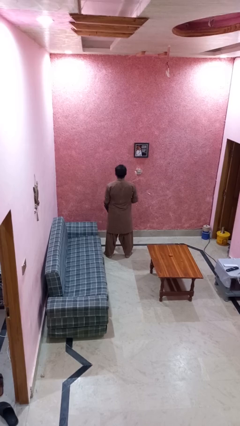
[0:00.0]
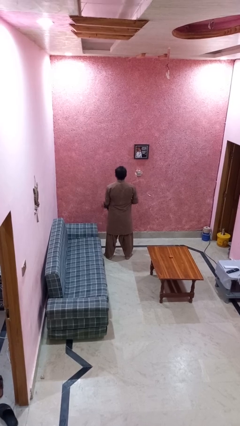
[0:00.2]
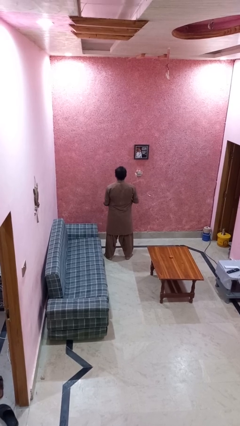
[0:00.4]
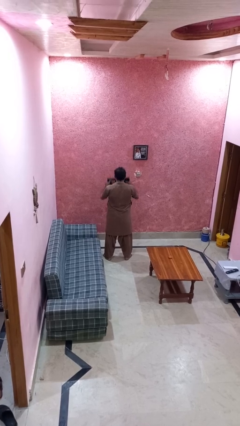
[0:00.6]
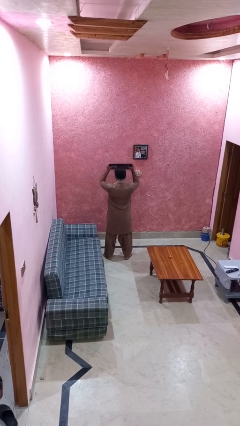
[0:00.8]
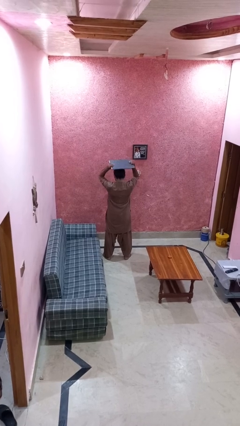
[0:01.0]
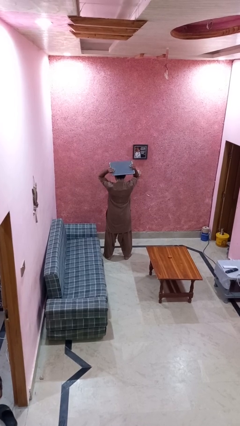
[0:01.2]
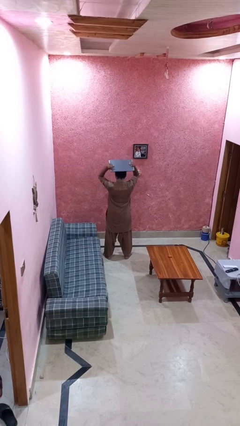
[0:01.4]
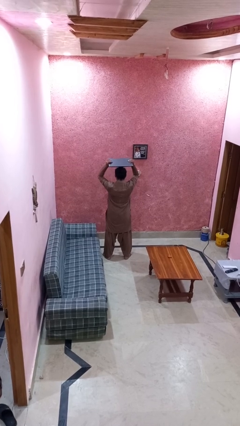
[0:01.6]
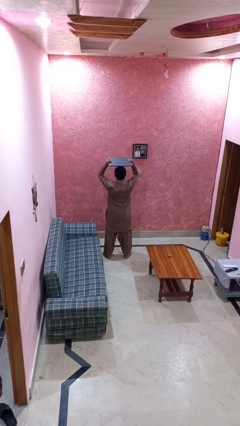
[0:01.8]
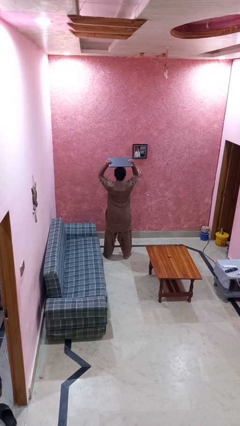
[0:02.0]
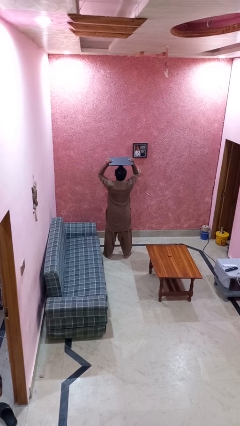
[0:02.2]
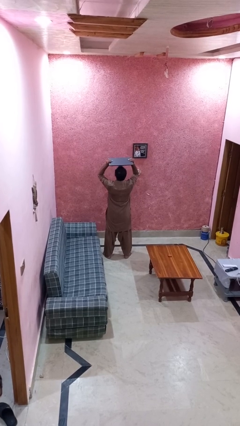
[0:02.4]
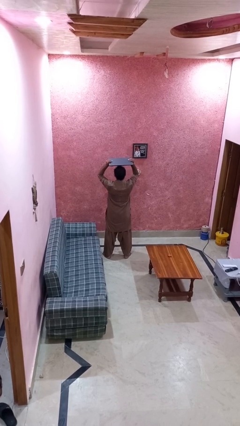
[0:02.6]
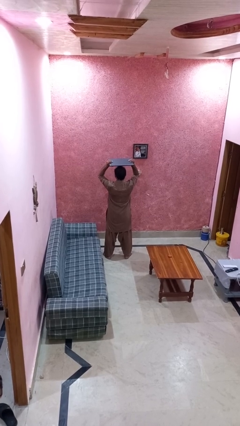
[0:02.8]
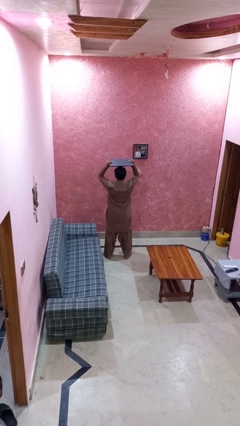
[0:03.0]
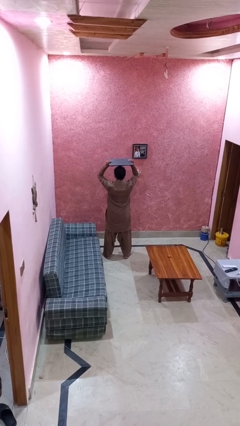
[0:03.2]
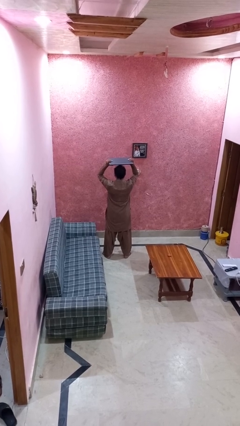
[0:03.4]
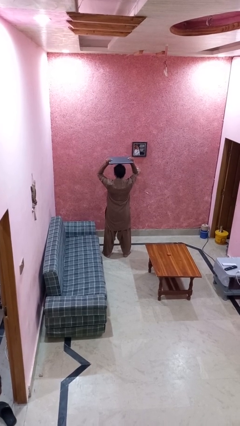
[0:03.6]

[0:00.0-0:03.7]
person holds object above head

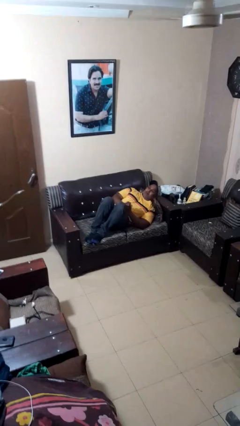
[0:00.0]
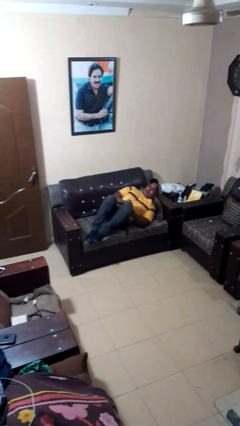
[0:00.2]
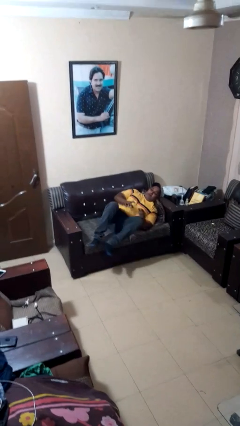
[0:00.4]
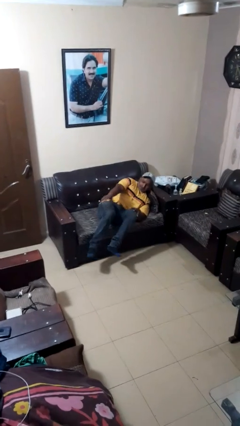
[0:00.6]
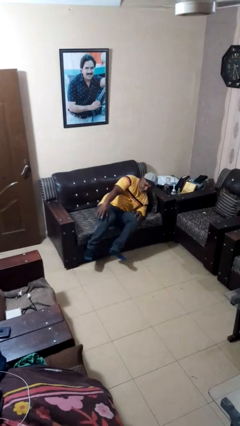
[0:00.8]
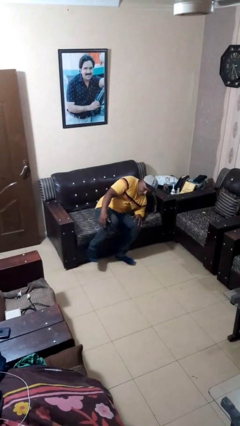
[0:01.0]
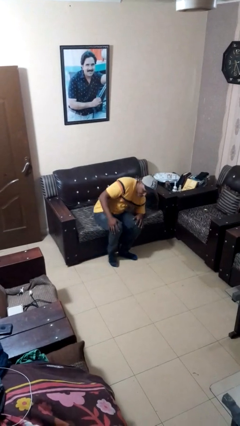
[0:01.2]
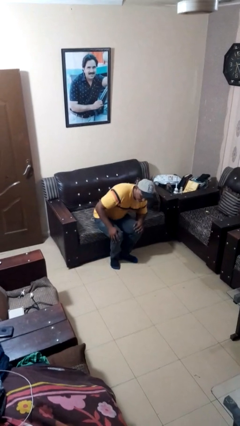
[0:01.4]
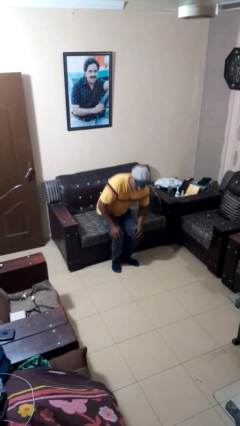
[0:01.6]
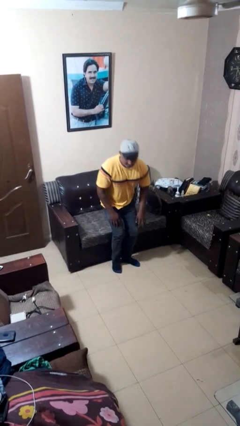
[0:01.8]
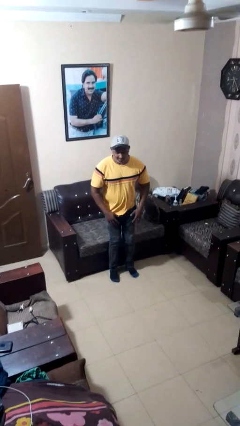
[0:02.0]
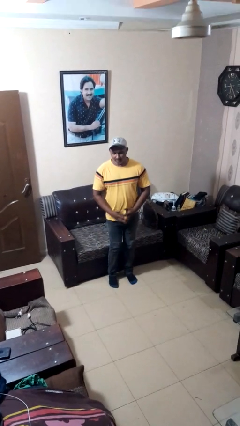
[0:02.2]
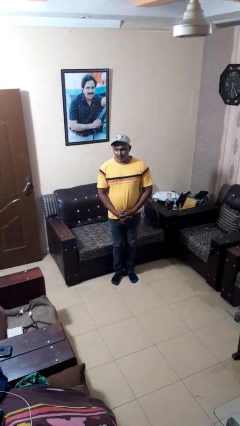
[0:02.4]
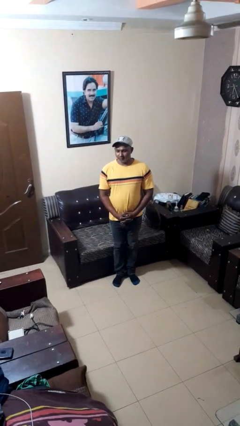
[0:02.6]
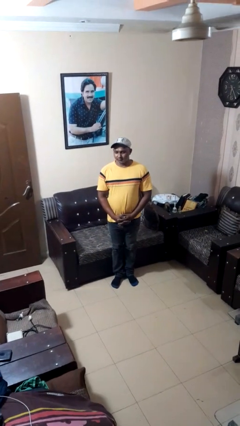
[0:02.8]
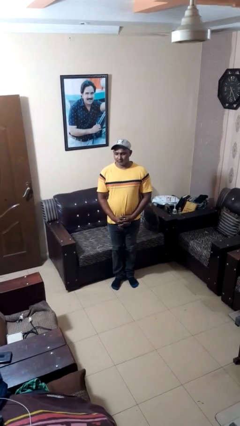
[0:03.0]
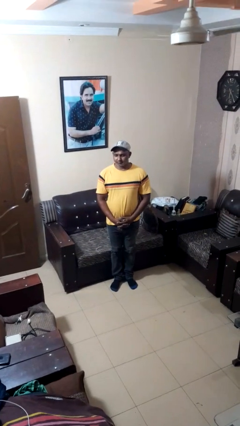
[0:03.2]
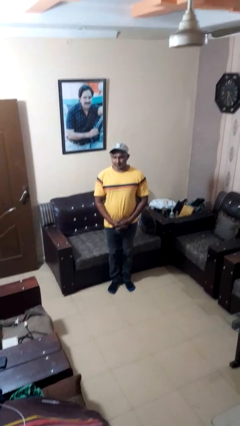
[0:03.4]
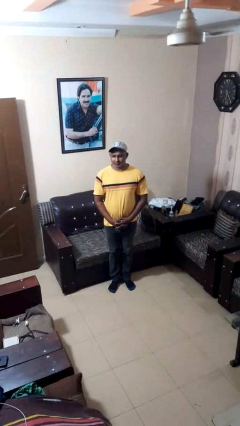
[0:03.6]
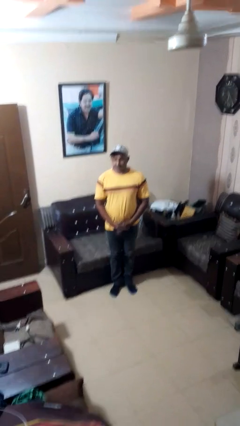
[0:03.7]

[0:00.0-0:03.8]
person stands up

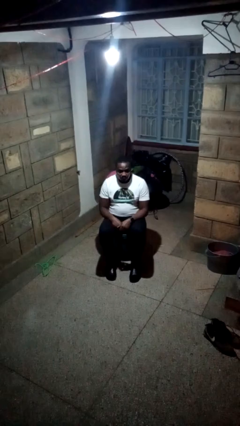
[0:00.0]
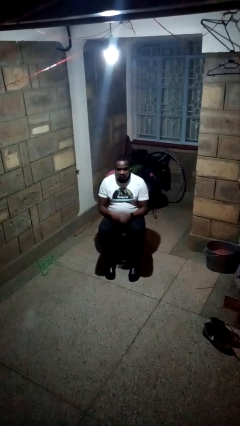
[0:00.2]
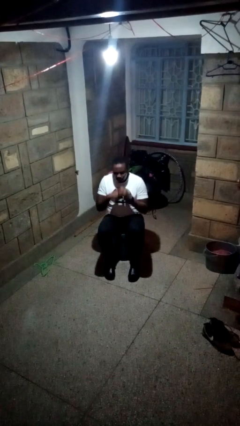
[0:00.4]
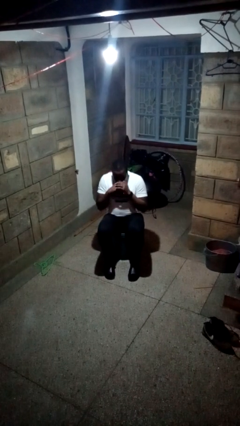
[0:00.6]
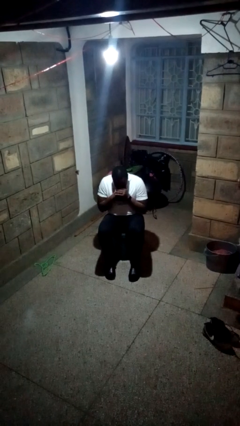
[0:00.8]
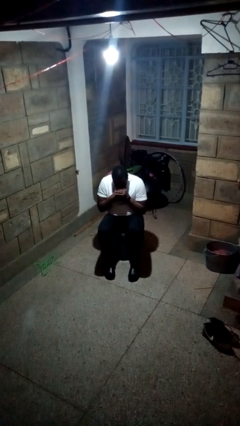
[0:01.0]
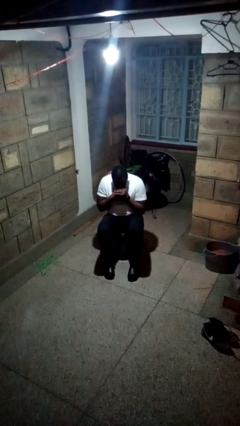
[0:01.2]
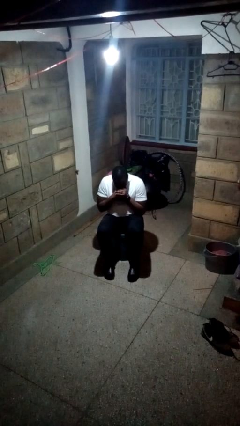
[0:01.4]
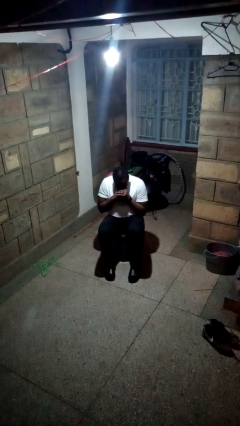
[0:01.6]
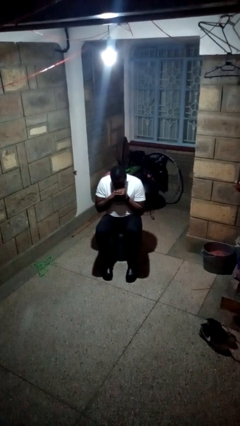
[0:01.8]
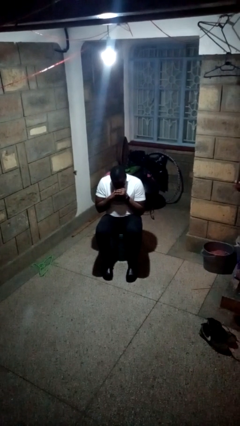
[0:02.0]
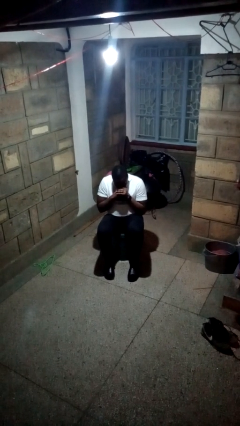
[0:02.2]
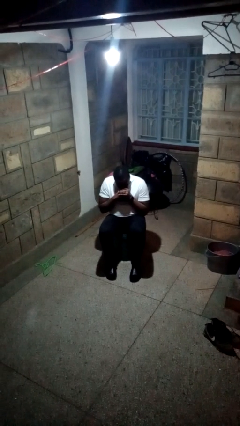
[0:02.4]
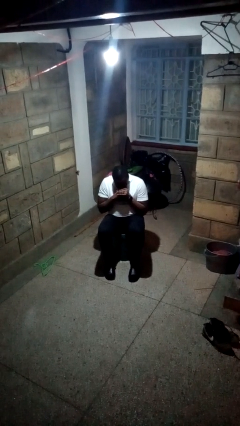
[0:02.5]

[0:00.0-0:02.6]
person sneezes into hand

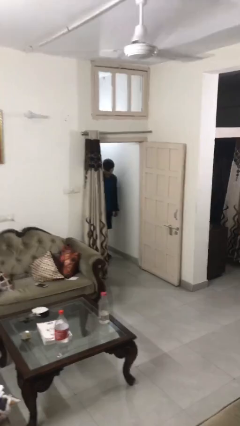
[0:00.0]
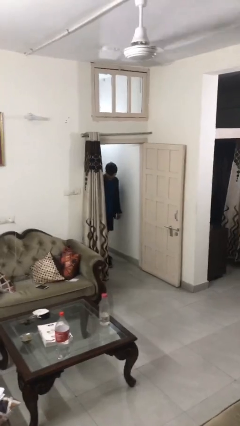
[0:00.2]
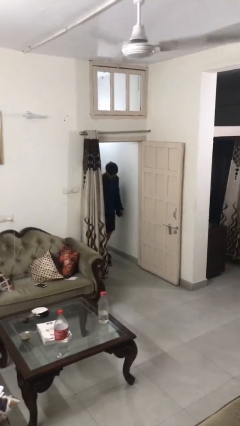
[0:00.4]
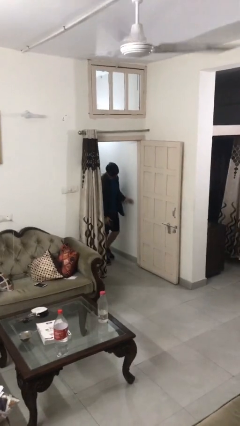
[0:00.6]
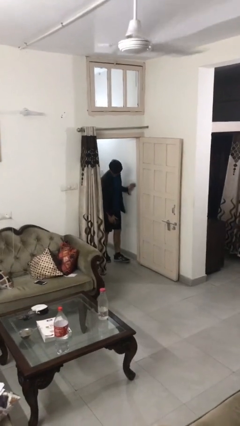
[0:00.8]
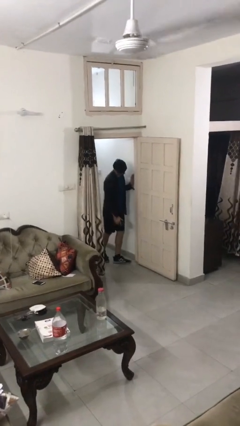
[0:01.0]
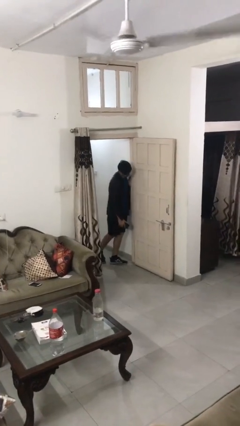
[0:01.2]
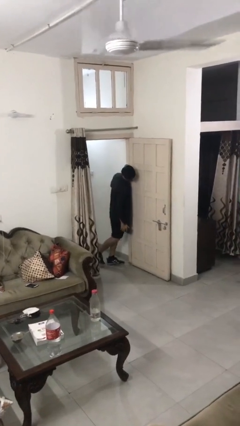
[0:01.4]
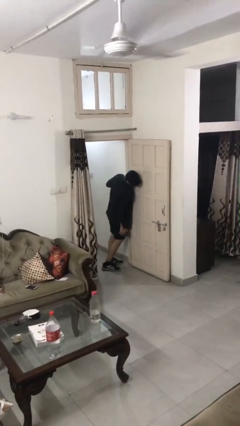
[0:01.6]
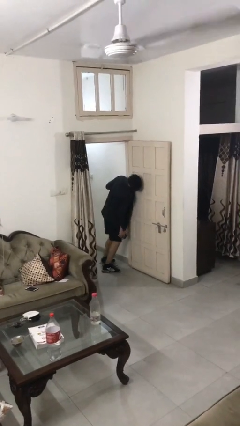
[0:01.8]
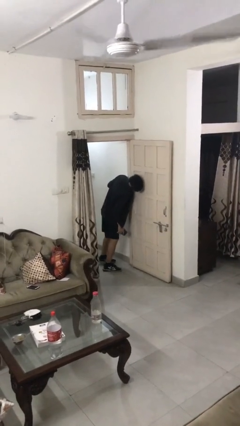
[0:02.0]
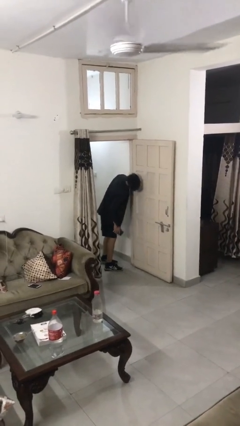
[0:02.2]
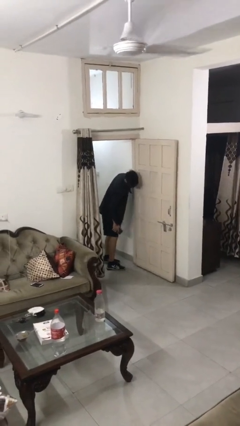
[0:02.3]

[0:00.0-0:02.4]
person bumps into wall

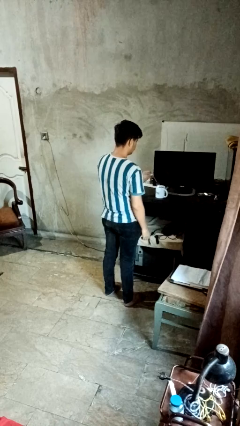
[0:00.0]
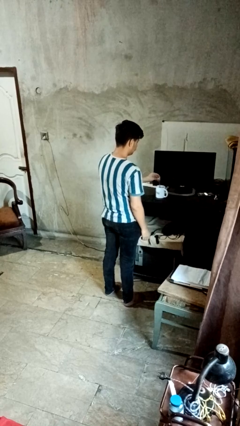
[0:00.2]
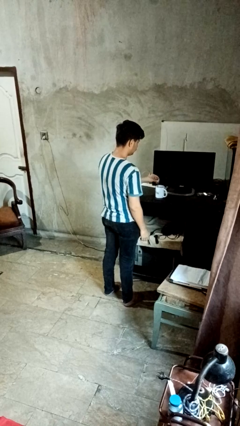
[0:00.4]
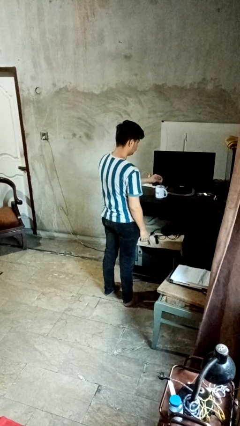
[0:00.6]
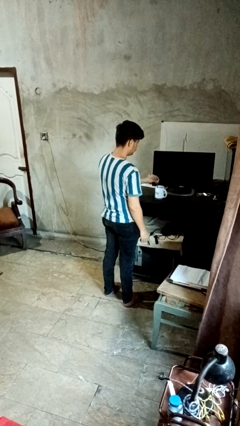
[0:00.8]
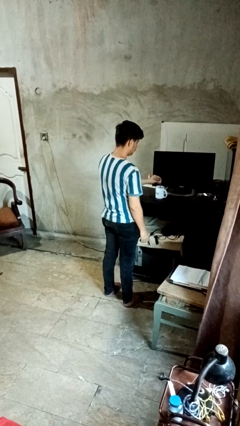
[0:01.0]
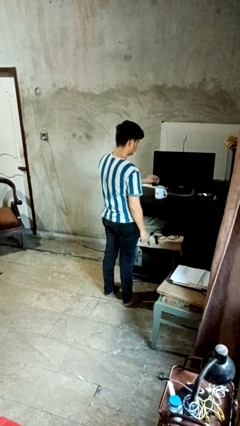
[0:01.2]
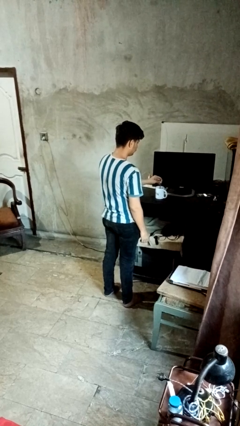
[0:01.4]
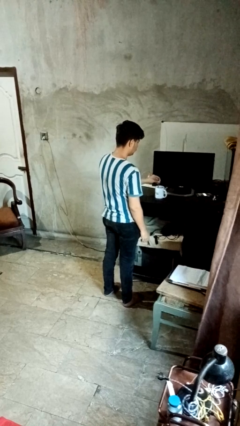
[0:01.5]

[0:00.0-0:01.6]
person stirs mug

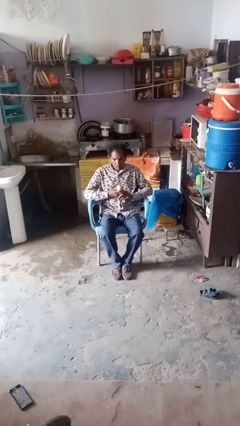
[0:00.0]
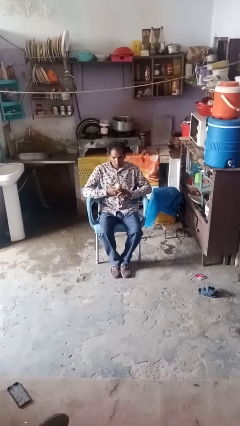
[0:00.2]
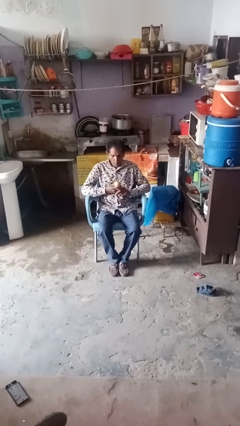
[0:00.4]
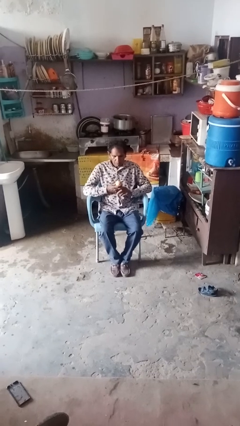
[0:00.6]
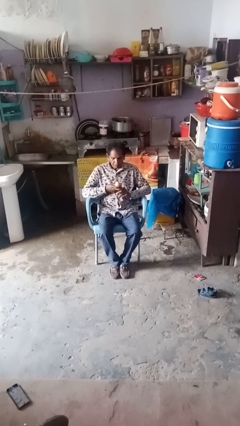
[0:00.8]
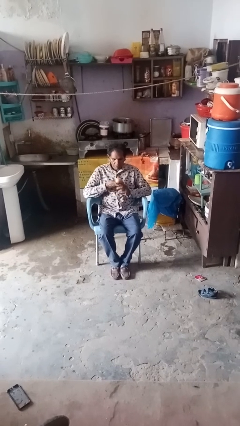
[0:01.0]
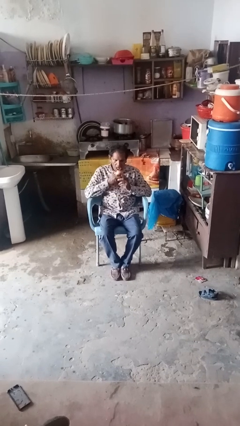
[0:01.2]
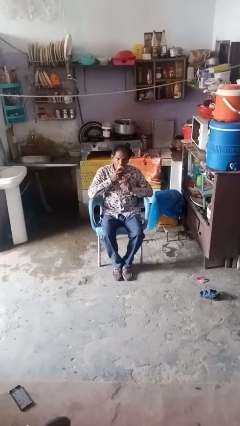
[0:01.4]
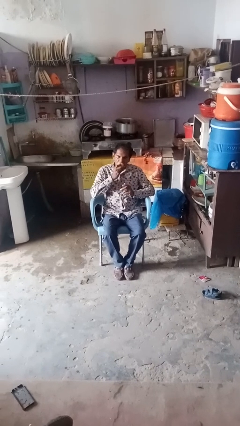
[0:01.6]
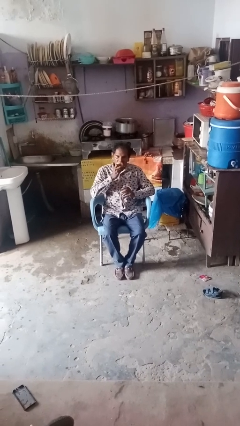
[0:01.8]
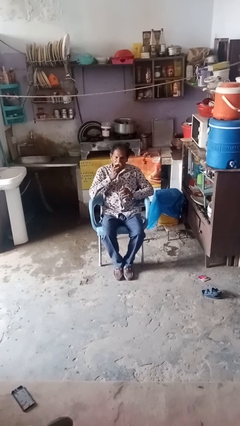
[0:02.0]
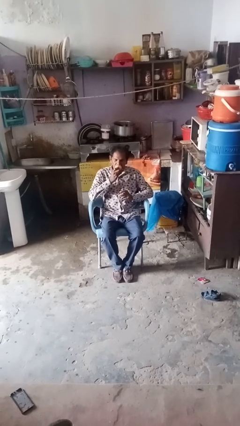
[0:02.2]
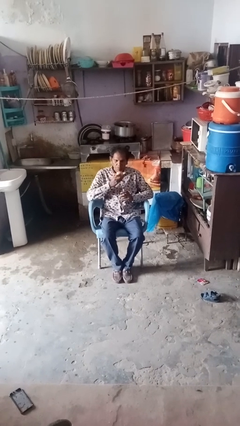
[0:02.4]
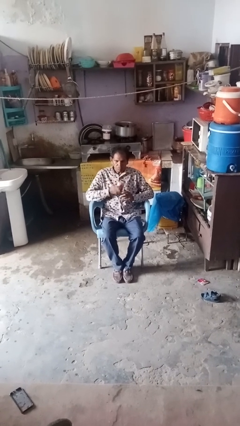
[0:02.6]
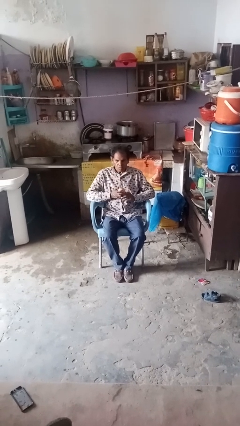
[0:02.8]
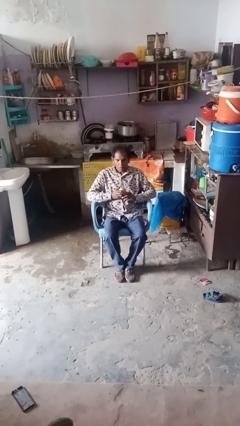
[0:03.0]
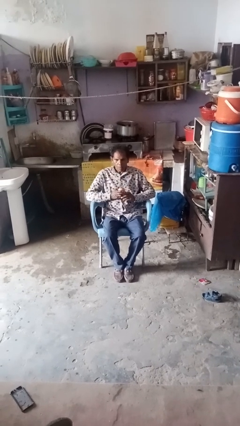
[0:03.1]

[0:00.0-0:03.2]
person eats apple

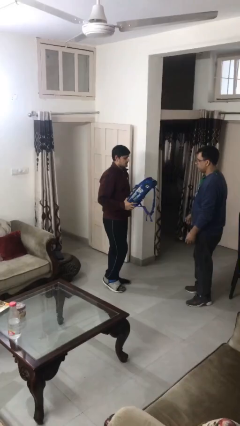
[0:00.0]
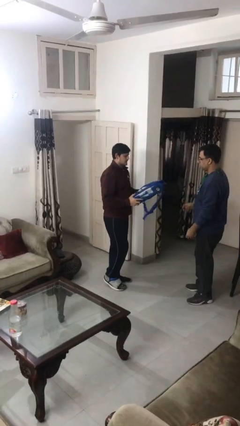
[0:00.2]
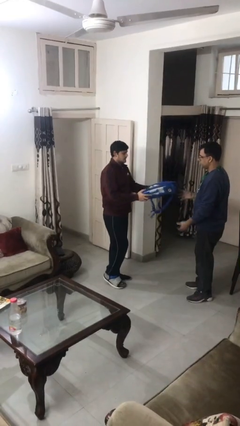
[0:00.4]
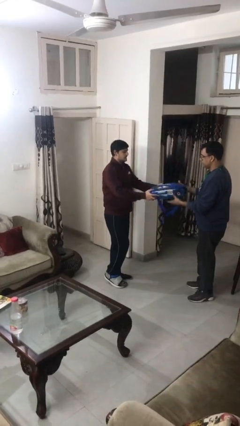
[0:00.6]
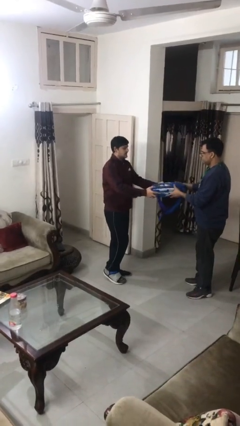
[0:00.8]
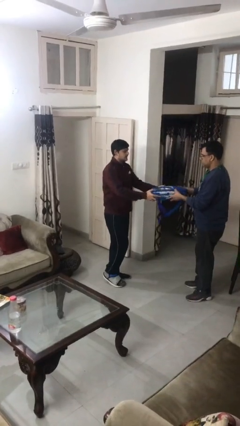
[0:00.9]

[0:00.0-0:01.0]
person transfers object to person
